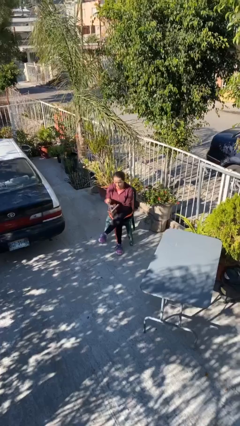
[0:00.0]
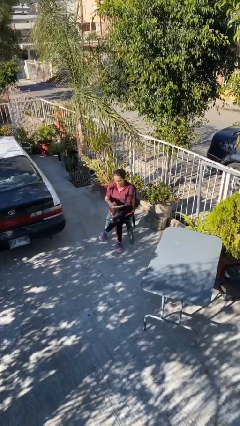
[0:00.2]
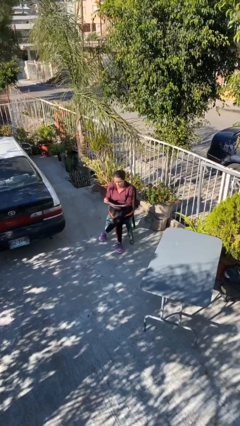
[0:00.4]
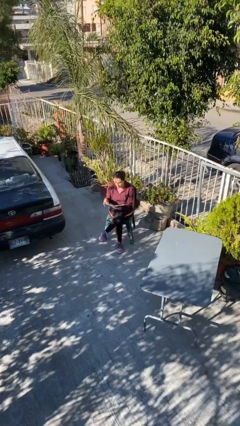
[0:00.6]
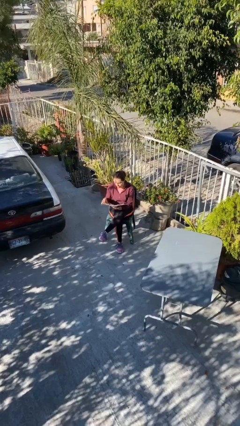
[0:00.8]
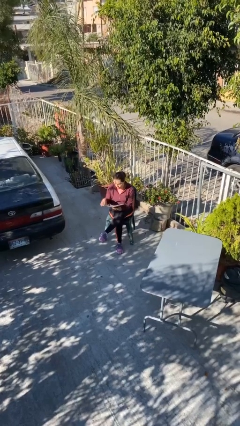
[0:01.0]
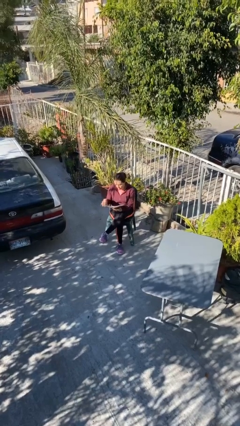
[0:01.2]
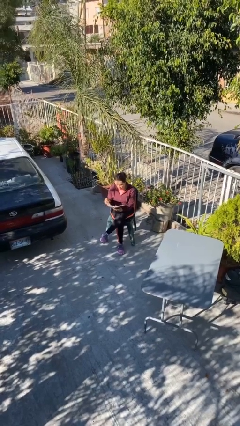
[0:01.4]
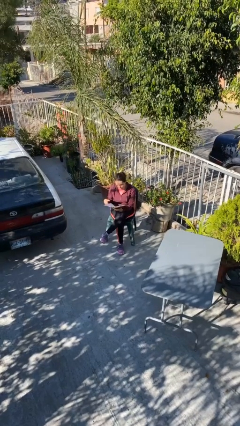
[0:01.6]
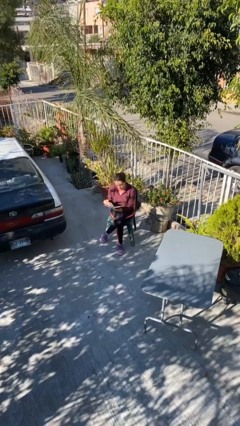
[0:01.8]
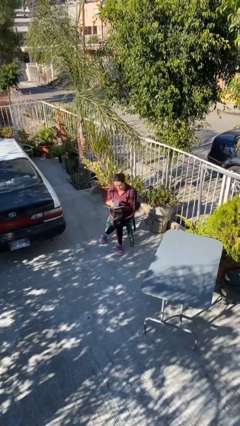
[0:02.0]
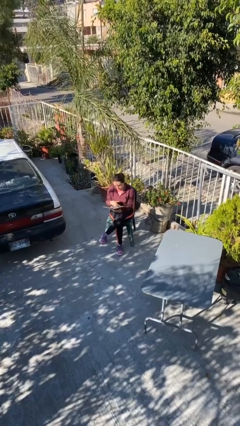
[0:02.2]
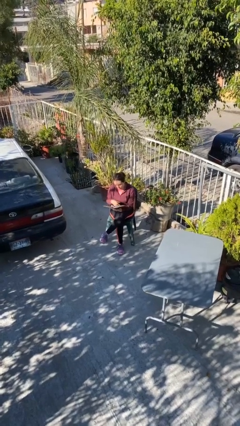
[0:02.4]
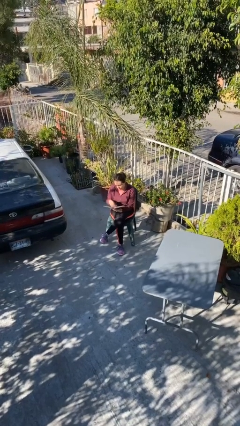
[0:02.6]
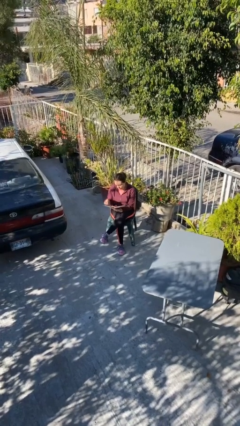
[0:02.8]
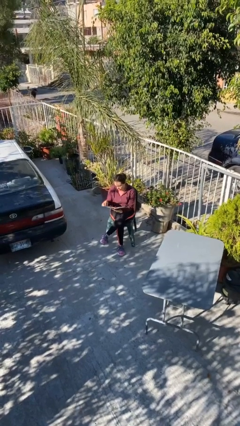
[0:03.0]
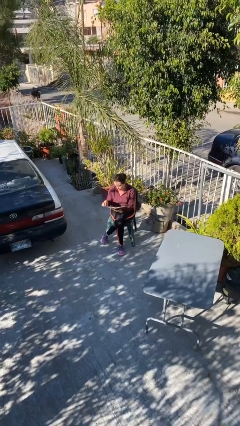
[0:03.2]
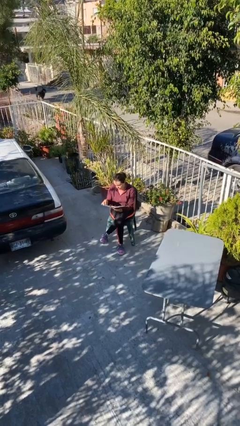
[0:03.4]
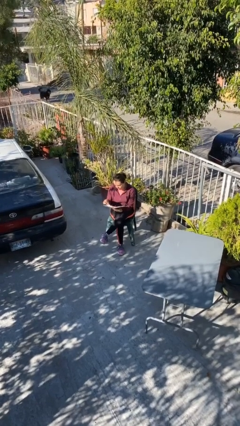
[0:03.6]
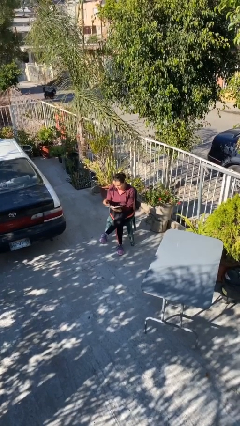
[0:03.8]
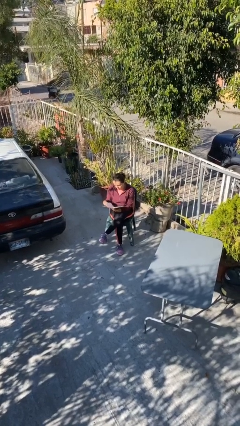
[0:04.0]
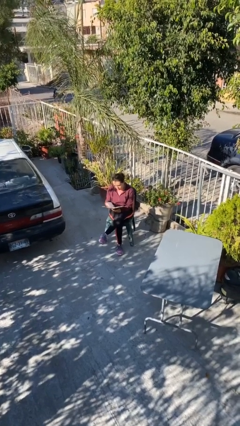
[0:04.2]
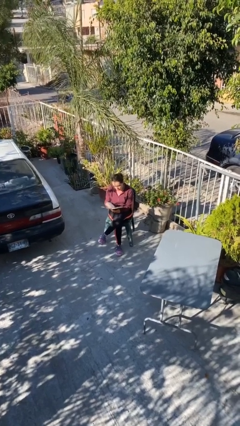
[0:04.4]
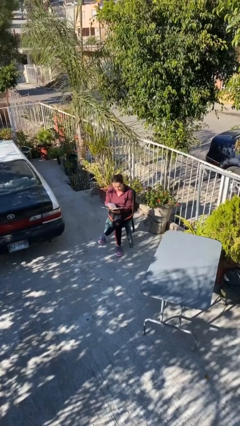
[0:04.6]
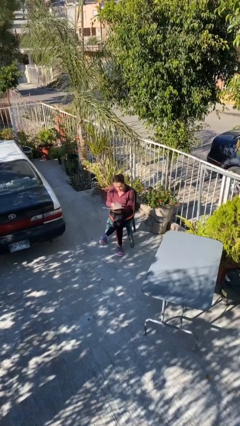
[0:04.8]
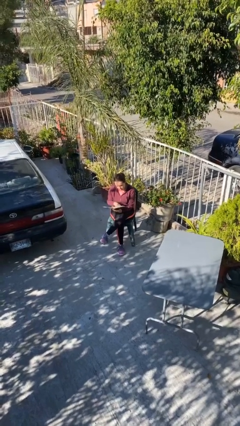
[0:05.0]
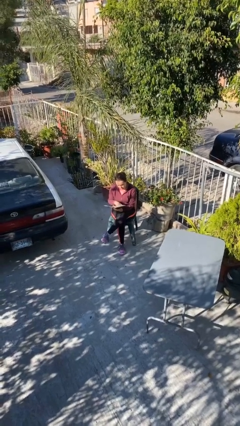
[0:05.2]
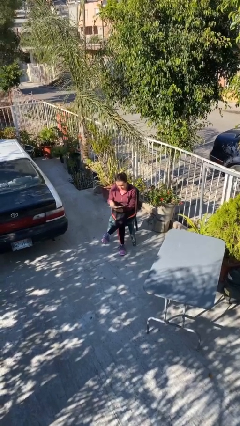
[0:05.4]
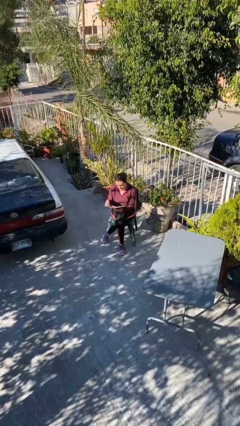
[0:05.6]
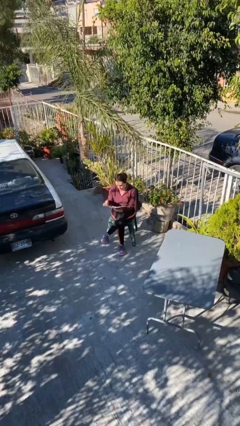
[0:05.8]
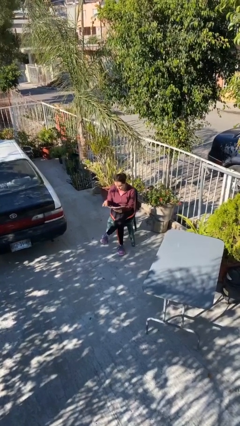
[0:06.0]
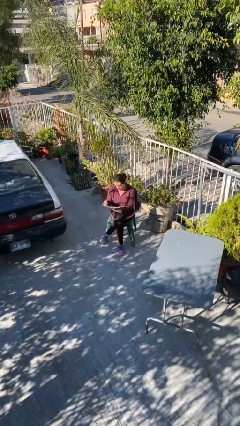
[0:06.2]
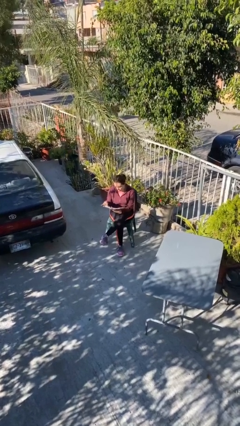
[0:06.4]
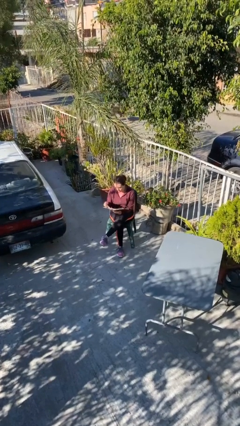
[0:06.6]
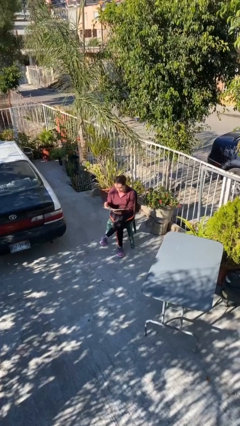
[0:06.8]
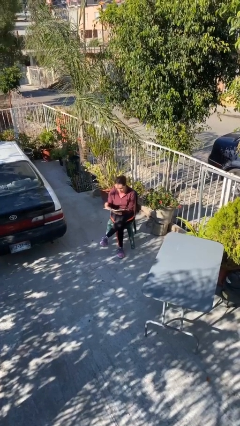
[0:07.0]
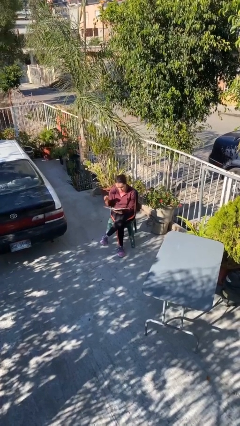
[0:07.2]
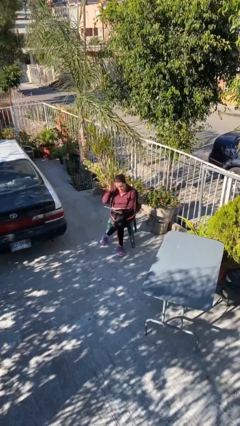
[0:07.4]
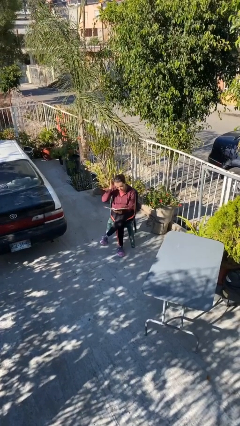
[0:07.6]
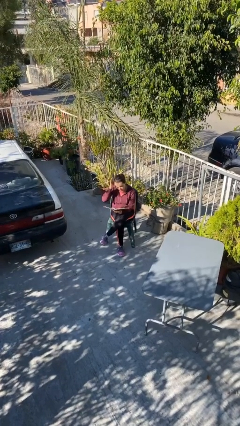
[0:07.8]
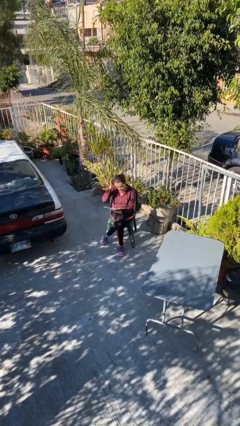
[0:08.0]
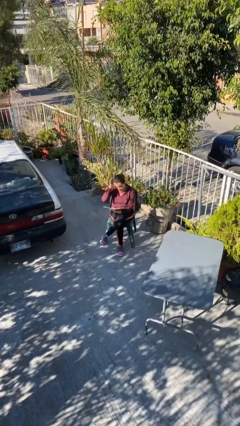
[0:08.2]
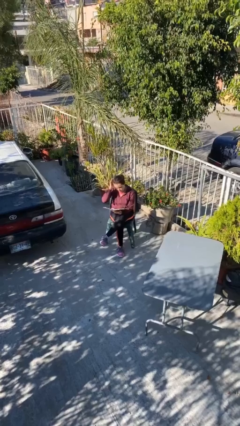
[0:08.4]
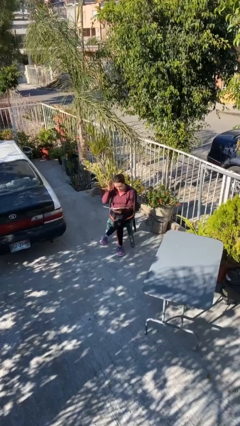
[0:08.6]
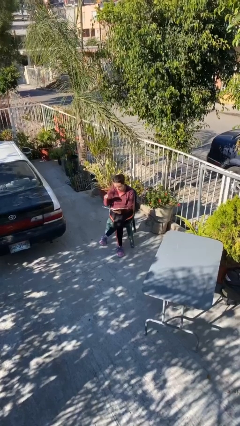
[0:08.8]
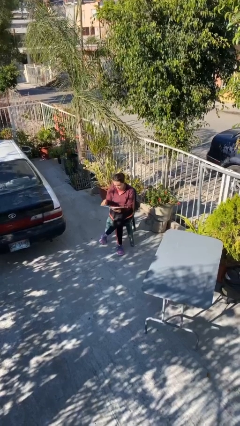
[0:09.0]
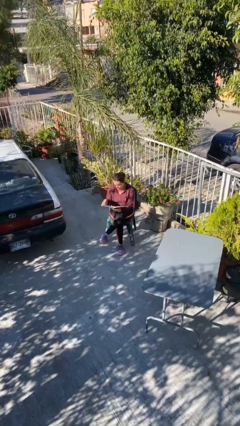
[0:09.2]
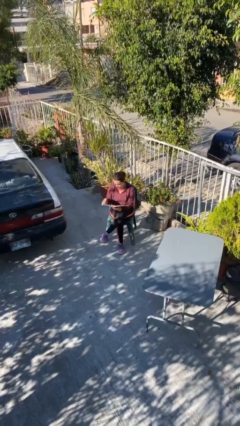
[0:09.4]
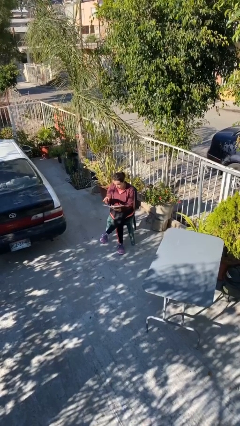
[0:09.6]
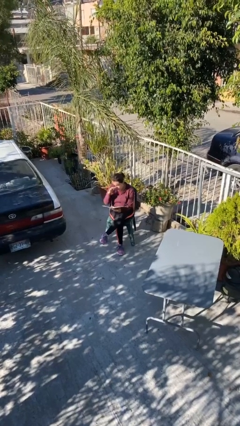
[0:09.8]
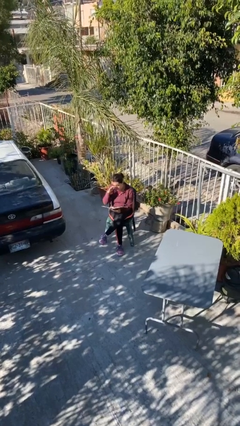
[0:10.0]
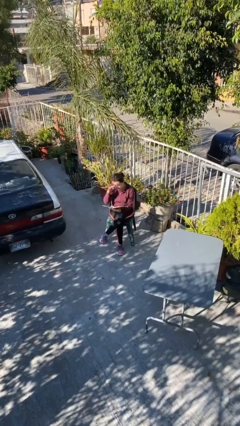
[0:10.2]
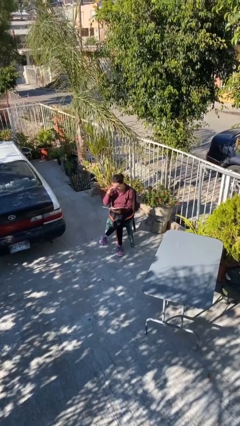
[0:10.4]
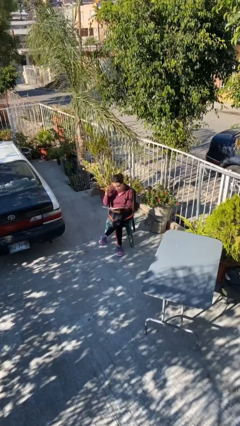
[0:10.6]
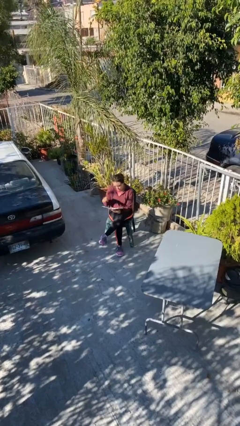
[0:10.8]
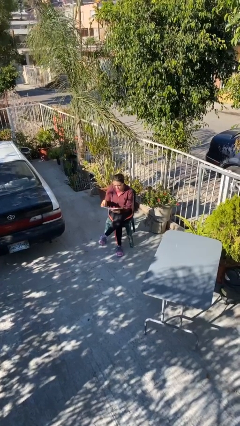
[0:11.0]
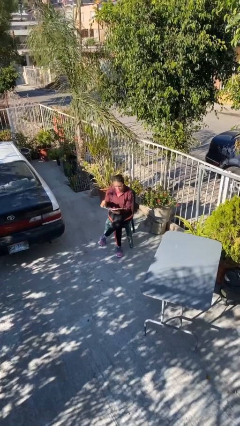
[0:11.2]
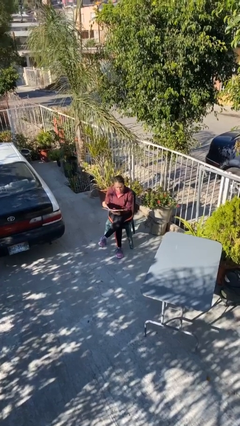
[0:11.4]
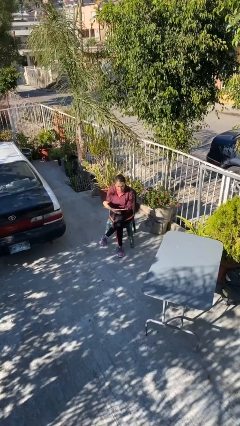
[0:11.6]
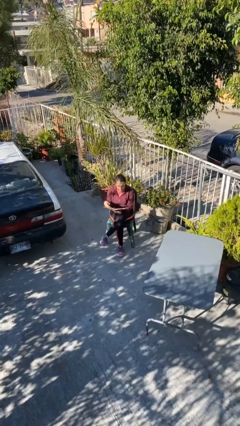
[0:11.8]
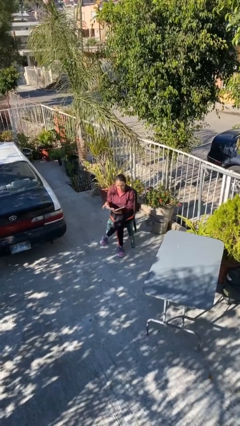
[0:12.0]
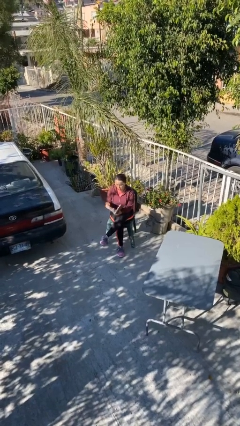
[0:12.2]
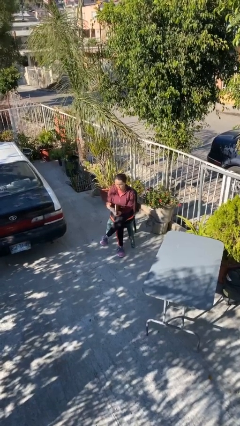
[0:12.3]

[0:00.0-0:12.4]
person reads document

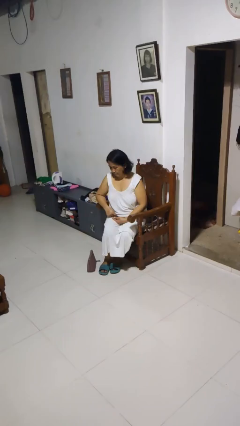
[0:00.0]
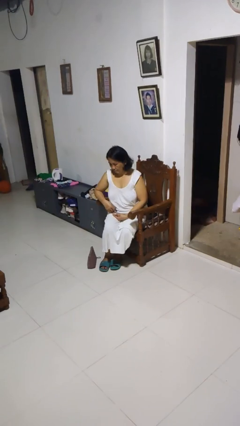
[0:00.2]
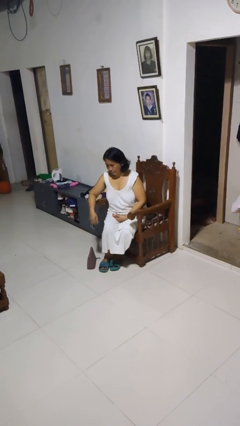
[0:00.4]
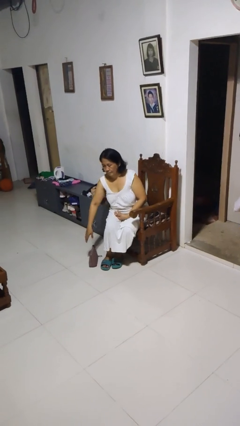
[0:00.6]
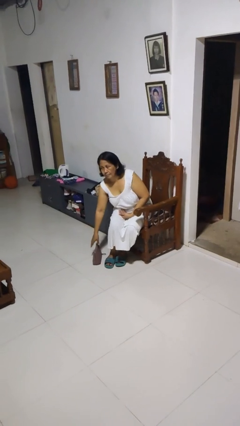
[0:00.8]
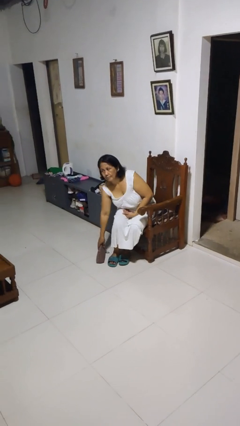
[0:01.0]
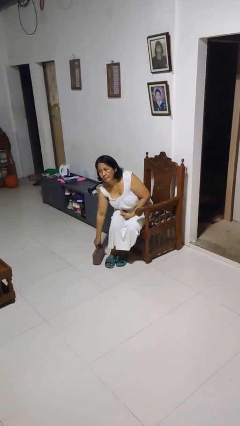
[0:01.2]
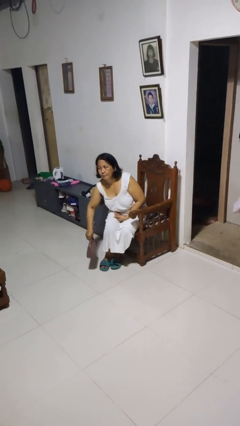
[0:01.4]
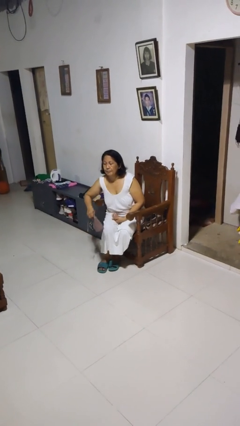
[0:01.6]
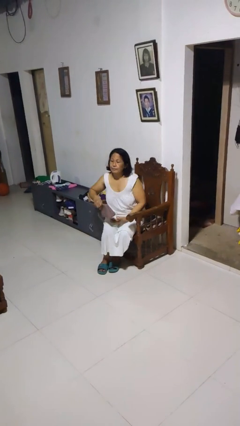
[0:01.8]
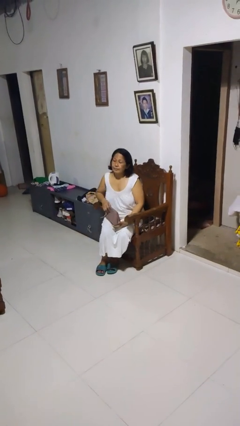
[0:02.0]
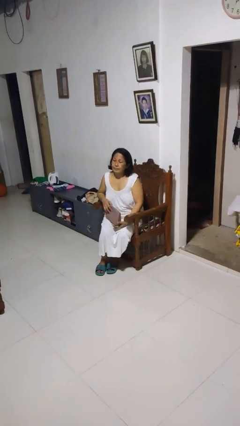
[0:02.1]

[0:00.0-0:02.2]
person picks up object from floor

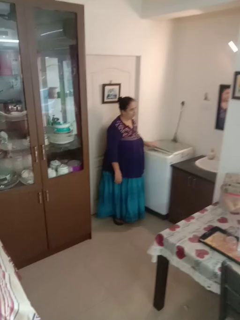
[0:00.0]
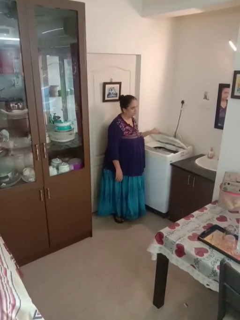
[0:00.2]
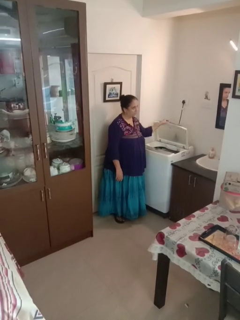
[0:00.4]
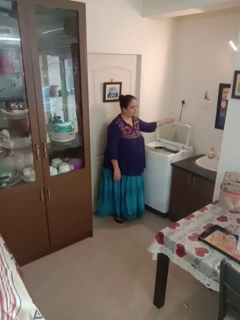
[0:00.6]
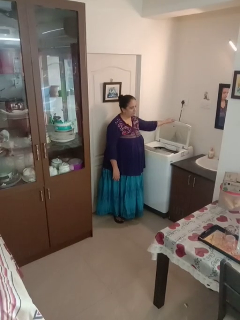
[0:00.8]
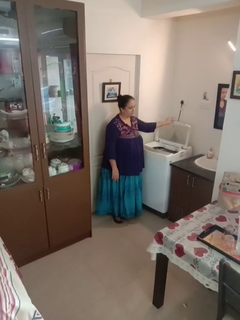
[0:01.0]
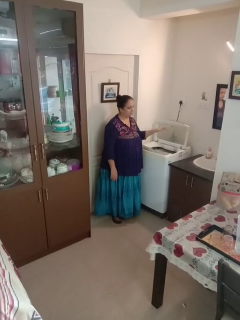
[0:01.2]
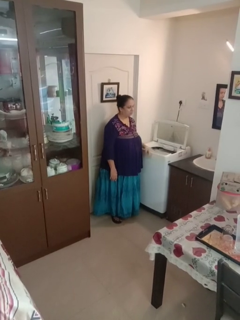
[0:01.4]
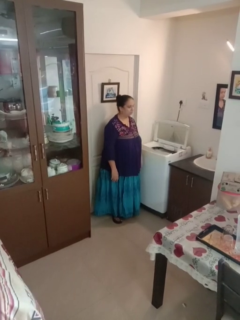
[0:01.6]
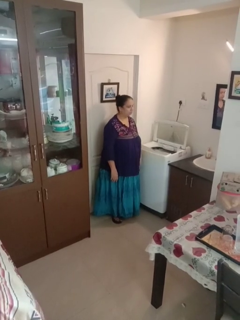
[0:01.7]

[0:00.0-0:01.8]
person opens clothes washer

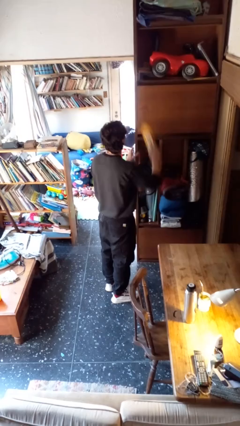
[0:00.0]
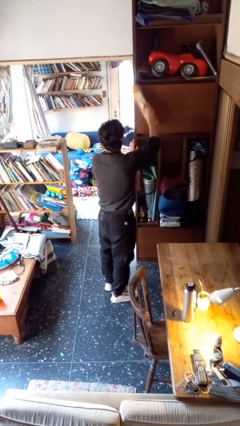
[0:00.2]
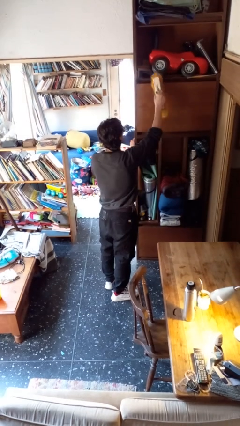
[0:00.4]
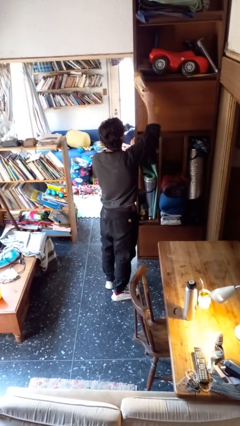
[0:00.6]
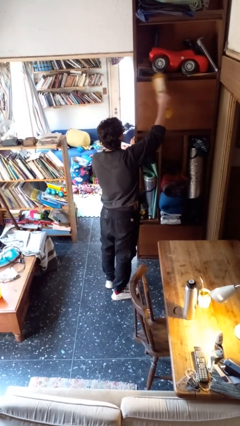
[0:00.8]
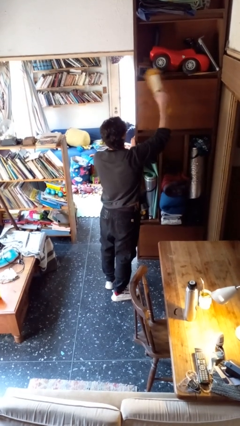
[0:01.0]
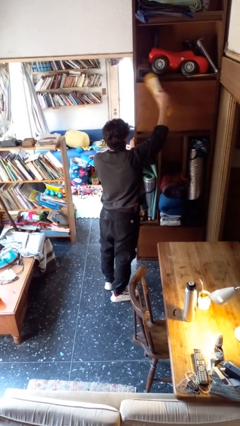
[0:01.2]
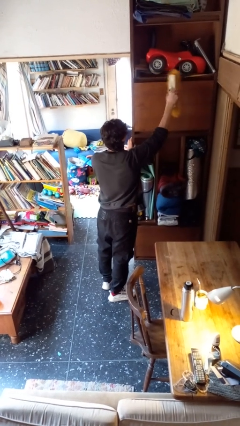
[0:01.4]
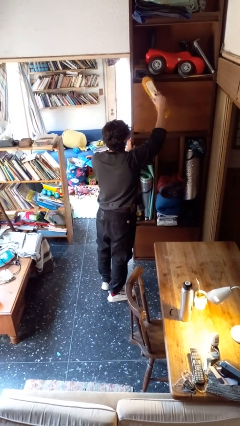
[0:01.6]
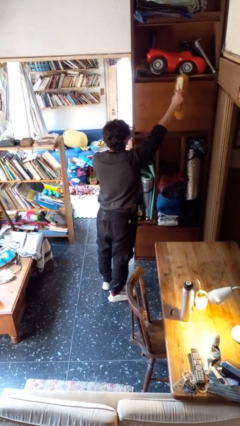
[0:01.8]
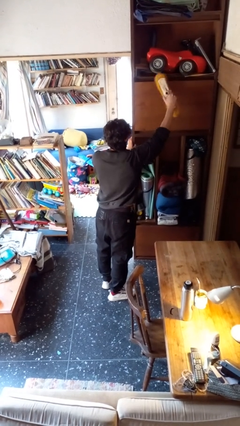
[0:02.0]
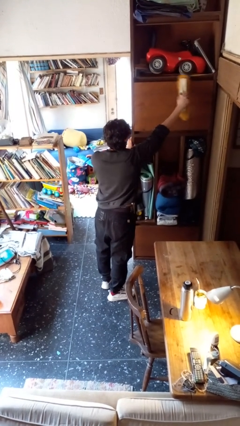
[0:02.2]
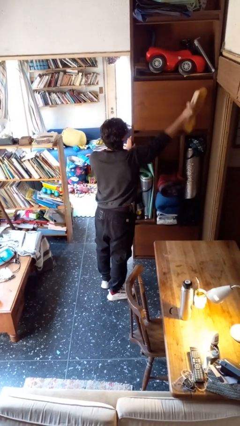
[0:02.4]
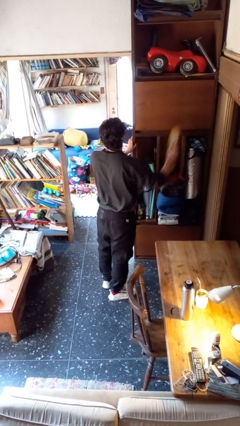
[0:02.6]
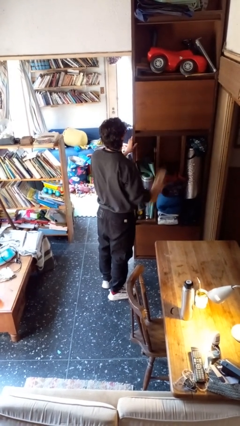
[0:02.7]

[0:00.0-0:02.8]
person dusts furniture
